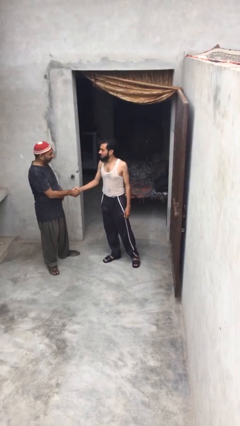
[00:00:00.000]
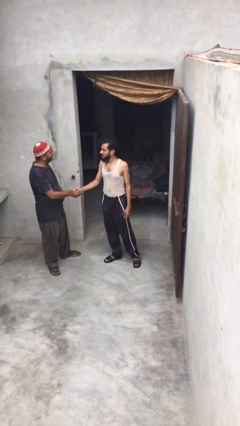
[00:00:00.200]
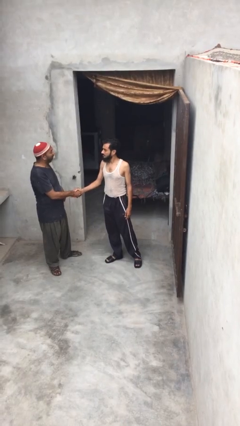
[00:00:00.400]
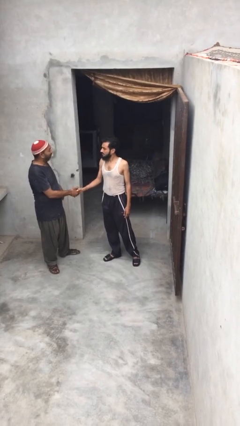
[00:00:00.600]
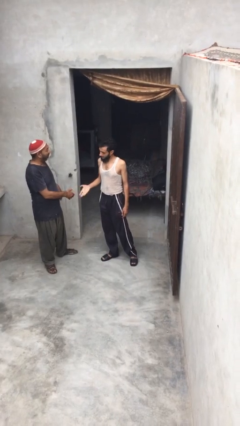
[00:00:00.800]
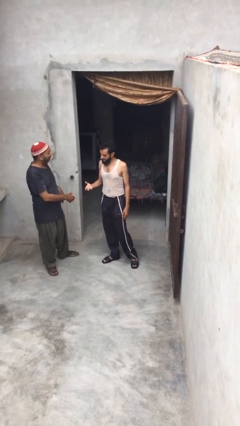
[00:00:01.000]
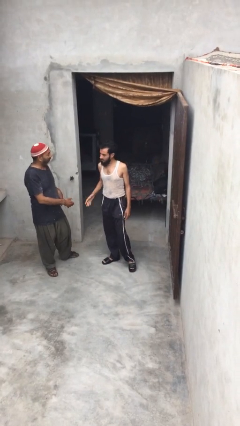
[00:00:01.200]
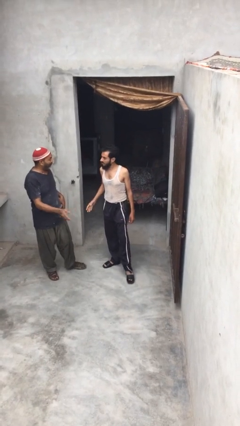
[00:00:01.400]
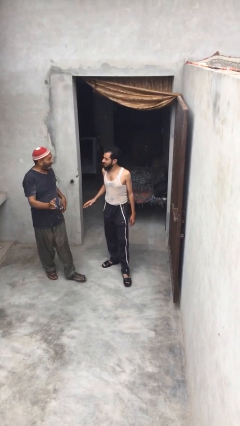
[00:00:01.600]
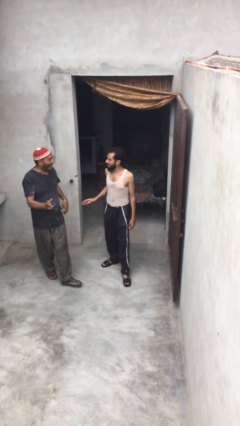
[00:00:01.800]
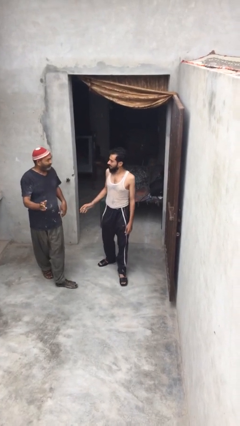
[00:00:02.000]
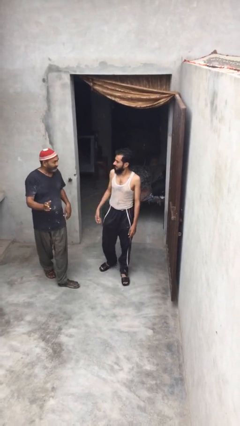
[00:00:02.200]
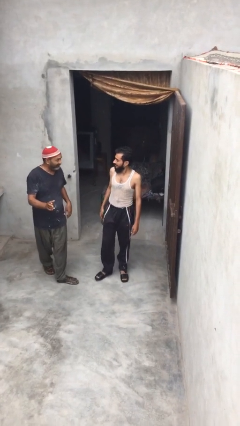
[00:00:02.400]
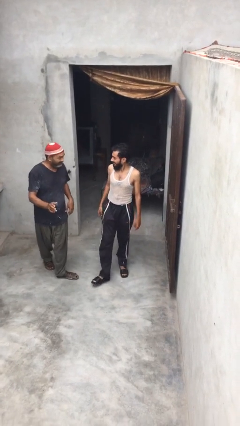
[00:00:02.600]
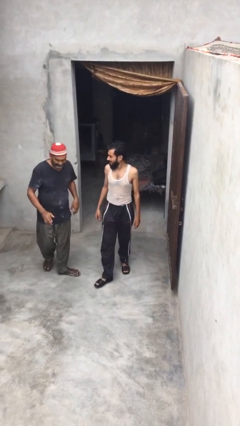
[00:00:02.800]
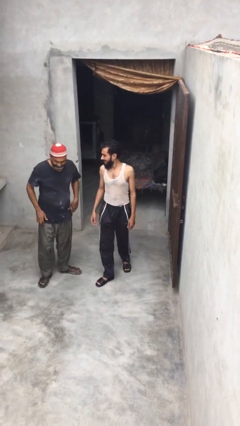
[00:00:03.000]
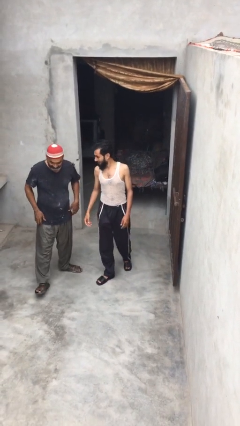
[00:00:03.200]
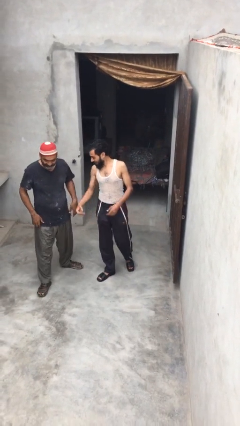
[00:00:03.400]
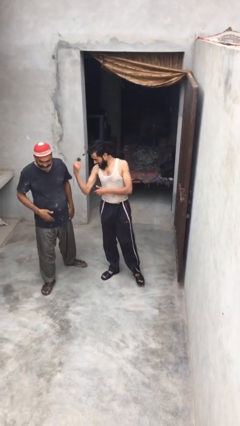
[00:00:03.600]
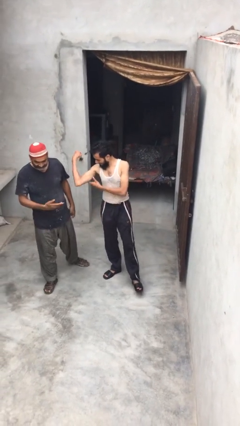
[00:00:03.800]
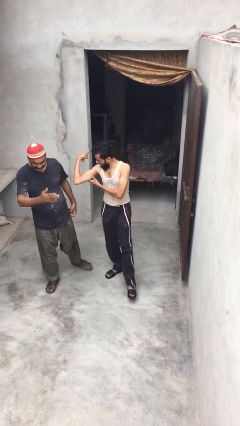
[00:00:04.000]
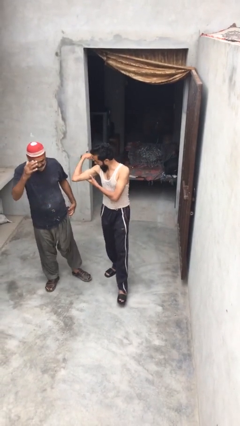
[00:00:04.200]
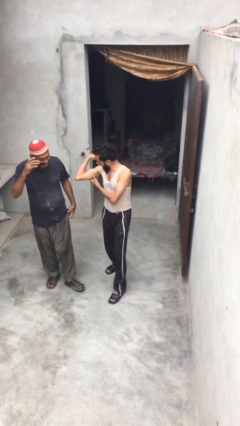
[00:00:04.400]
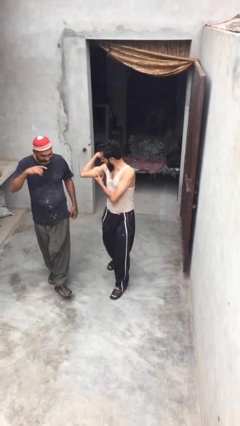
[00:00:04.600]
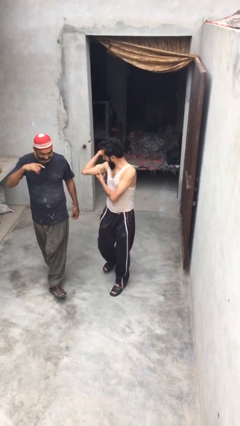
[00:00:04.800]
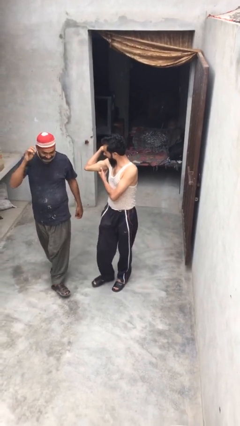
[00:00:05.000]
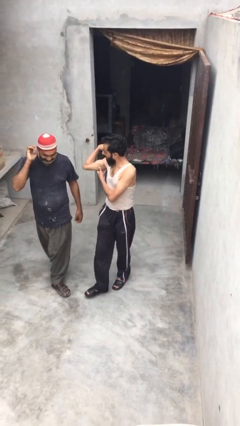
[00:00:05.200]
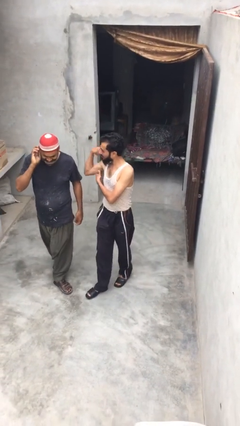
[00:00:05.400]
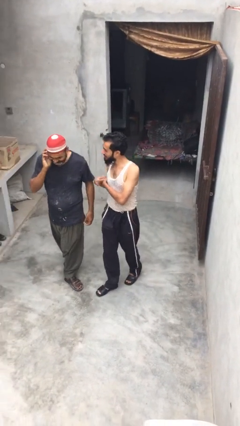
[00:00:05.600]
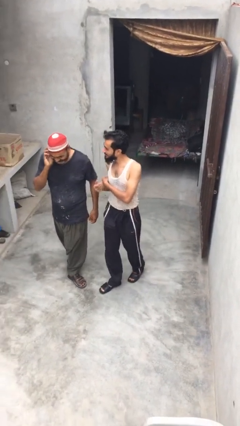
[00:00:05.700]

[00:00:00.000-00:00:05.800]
person talks to person

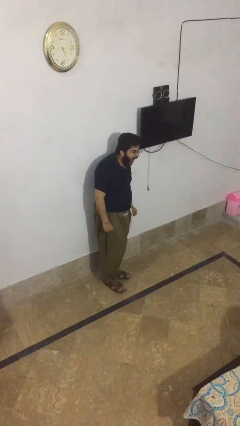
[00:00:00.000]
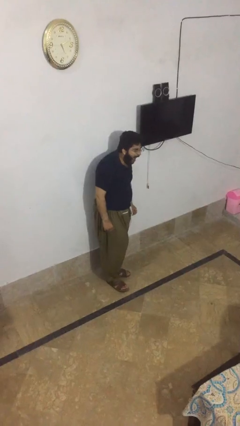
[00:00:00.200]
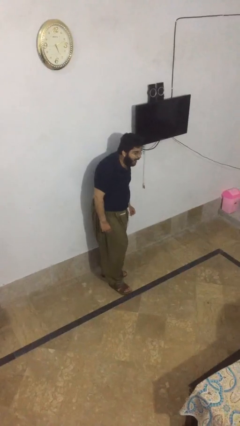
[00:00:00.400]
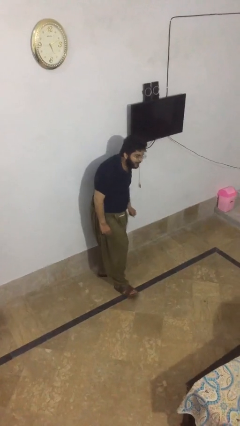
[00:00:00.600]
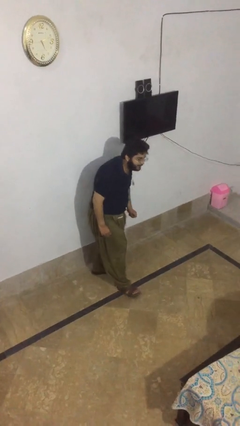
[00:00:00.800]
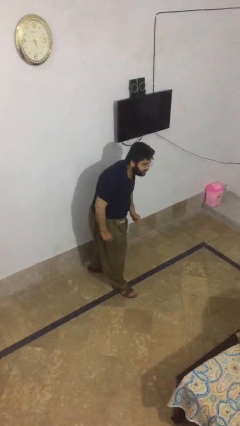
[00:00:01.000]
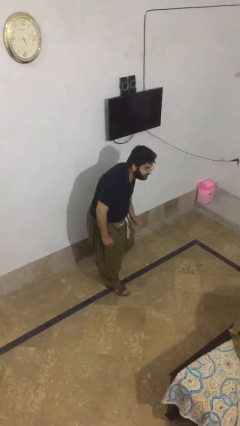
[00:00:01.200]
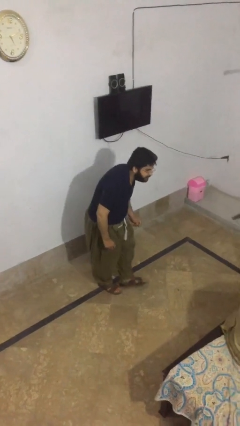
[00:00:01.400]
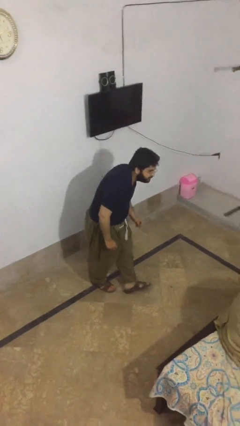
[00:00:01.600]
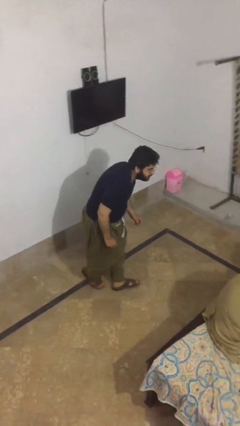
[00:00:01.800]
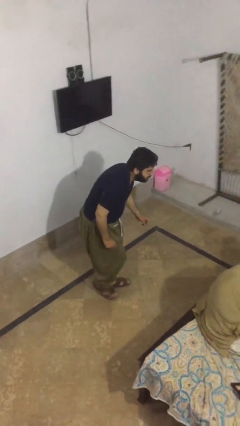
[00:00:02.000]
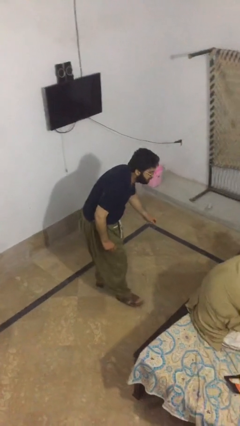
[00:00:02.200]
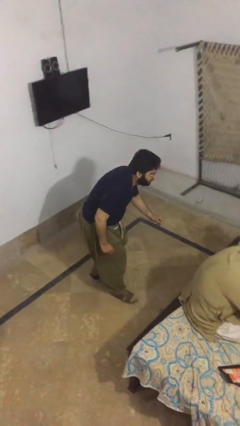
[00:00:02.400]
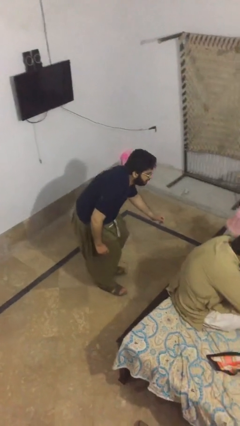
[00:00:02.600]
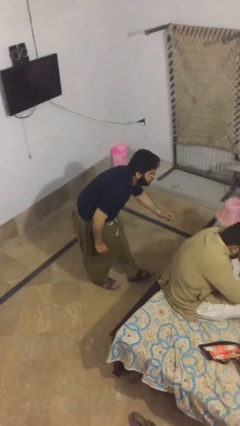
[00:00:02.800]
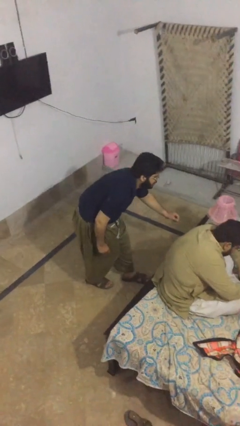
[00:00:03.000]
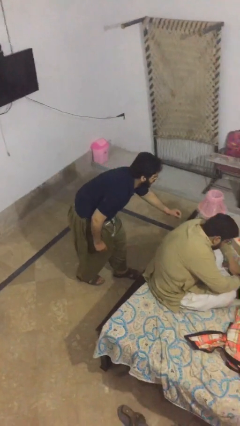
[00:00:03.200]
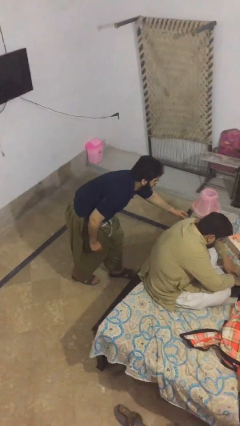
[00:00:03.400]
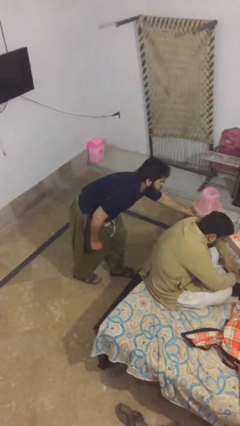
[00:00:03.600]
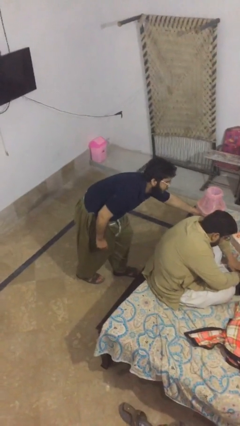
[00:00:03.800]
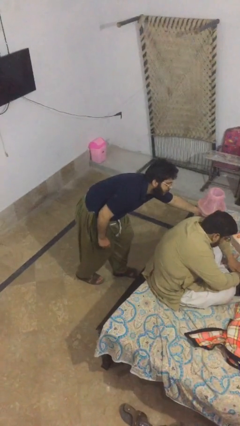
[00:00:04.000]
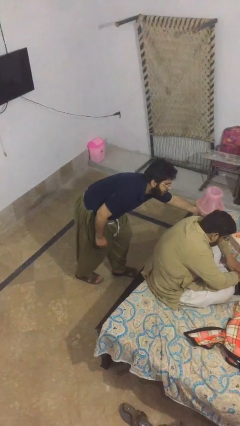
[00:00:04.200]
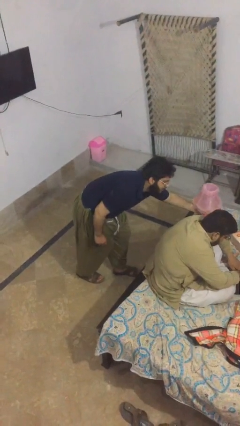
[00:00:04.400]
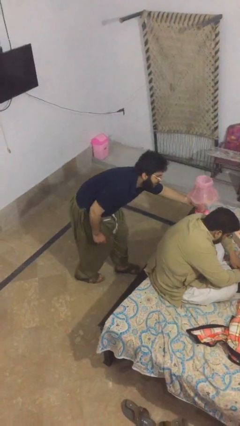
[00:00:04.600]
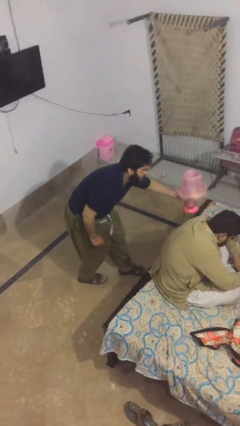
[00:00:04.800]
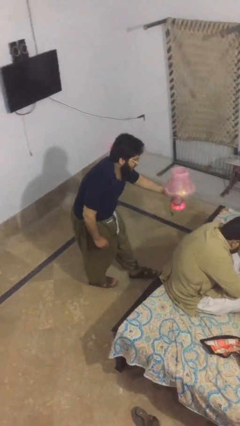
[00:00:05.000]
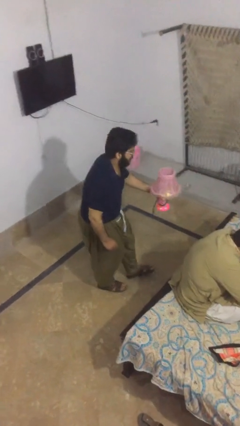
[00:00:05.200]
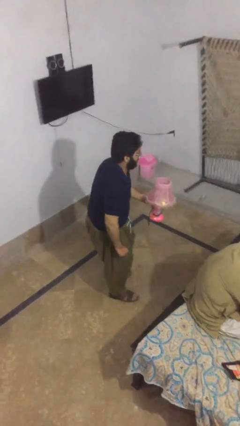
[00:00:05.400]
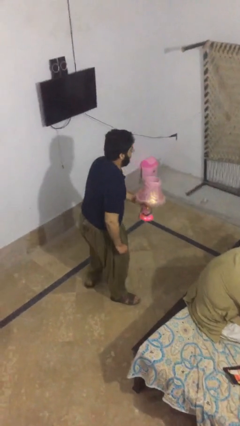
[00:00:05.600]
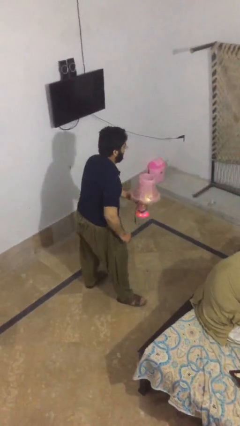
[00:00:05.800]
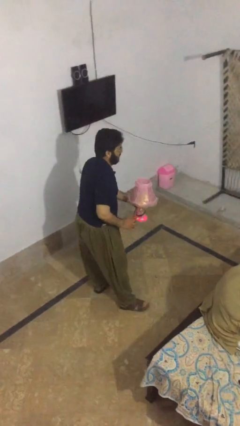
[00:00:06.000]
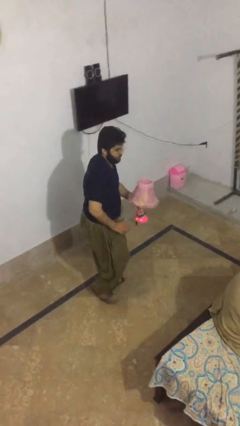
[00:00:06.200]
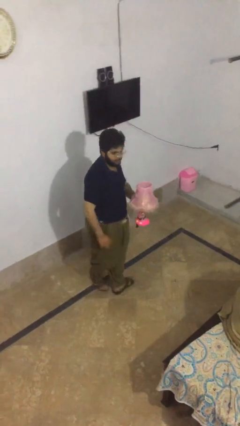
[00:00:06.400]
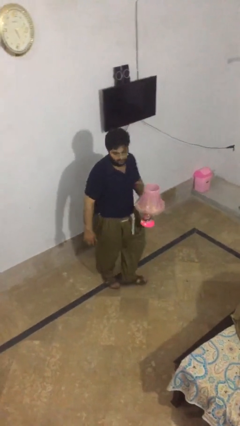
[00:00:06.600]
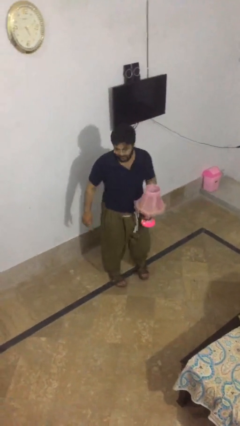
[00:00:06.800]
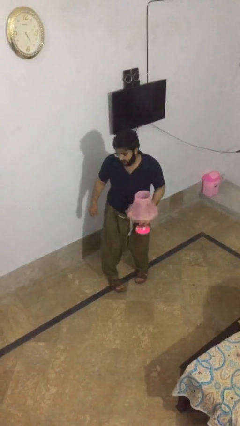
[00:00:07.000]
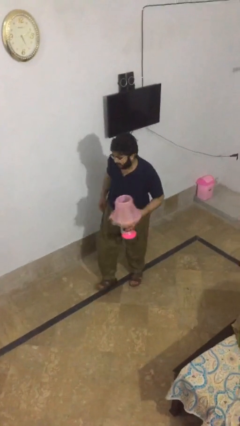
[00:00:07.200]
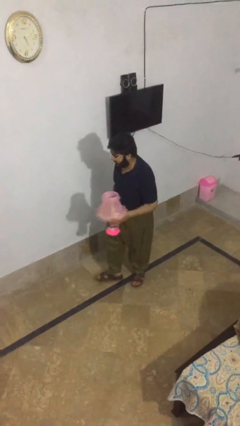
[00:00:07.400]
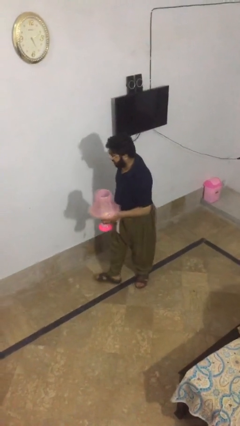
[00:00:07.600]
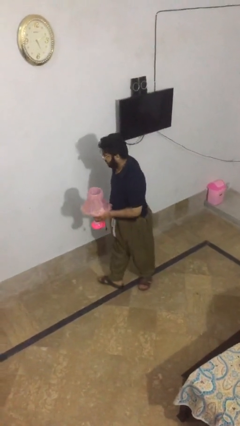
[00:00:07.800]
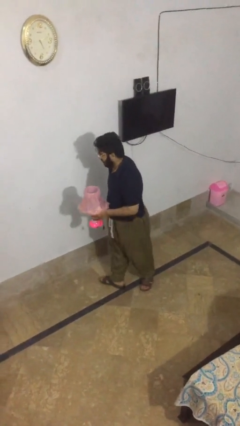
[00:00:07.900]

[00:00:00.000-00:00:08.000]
person steals object from person

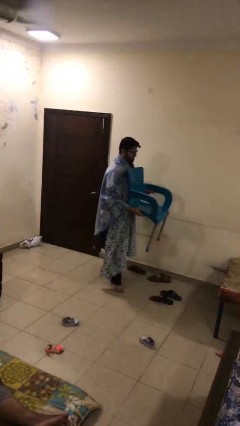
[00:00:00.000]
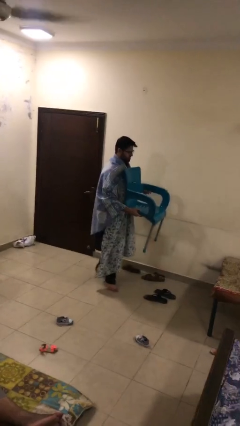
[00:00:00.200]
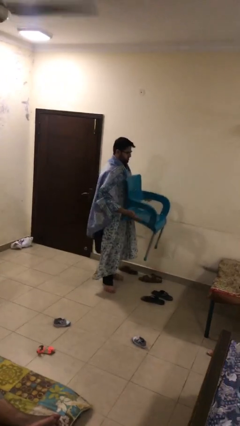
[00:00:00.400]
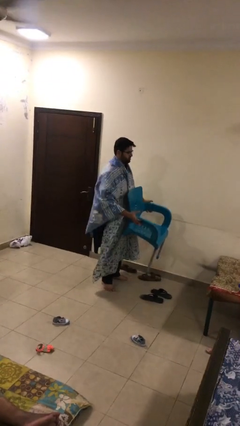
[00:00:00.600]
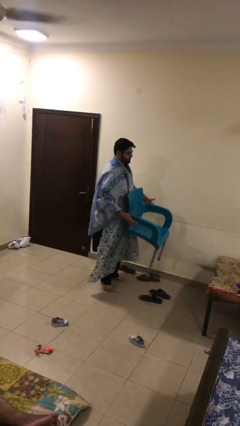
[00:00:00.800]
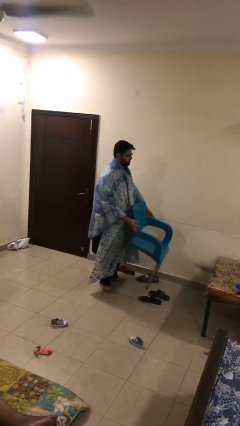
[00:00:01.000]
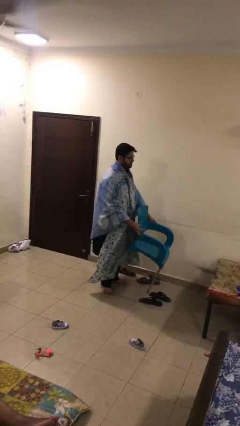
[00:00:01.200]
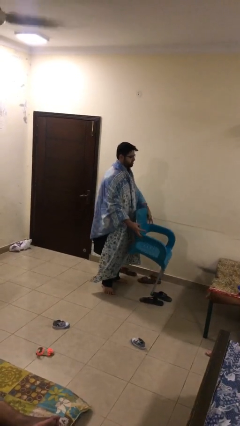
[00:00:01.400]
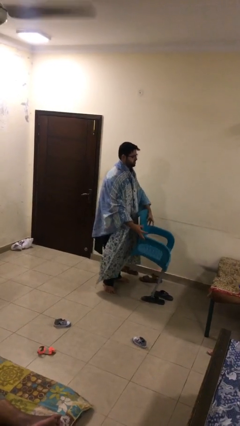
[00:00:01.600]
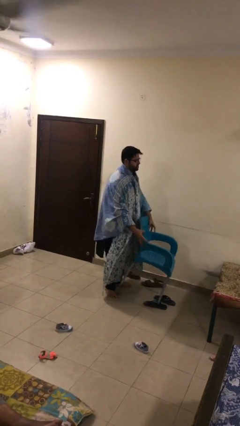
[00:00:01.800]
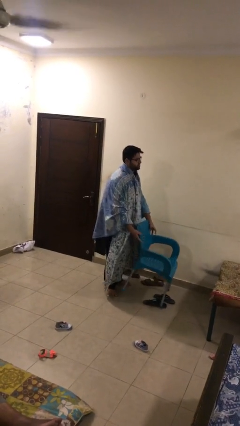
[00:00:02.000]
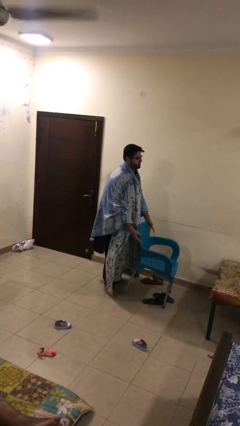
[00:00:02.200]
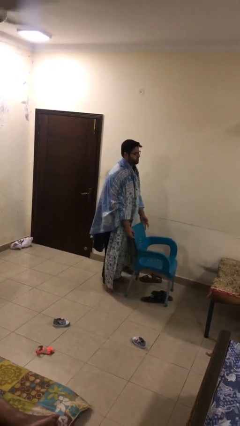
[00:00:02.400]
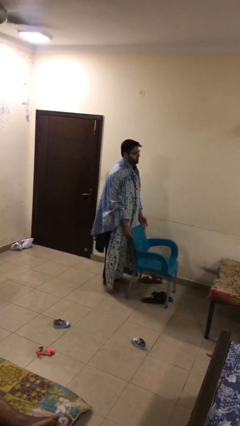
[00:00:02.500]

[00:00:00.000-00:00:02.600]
person puts down object on floor

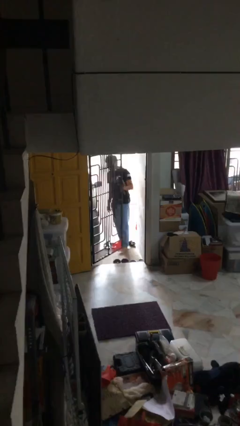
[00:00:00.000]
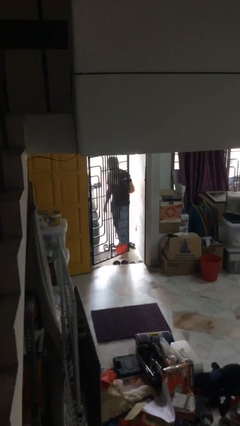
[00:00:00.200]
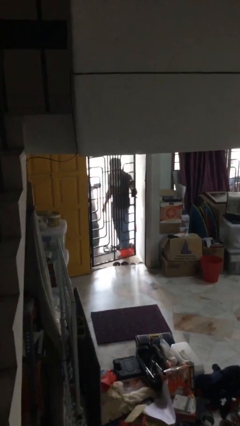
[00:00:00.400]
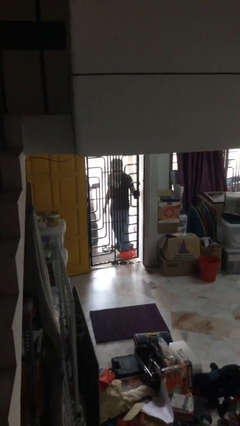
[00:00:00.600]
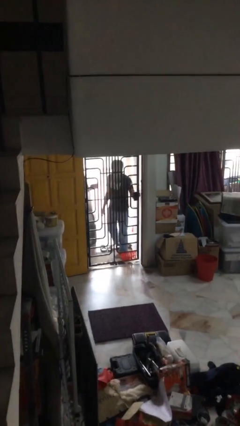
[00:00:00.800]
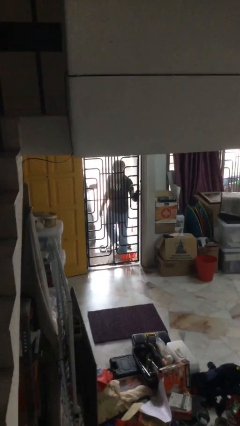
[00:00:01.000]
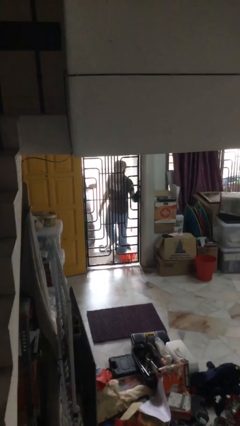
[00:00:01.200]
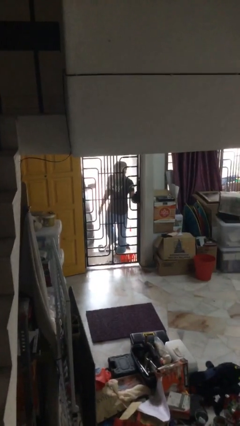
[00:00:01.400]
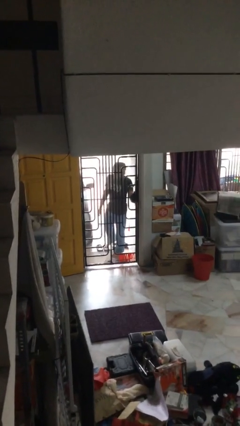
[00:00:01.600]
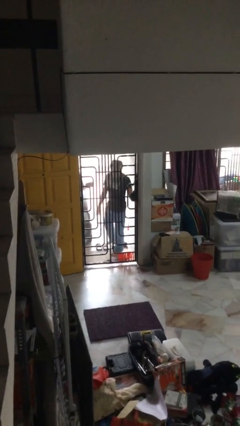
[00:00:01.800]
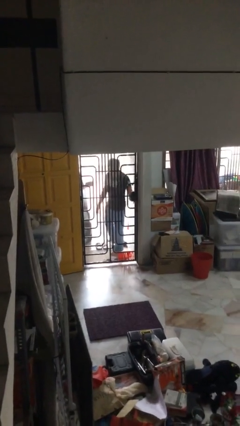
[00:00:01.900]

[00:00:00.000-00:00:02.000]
person closes facility door
